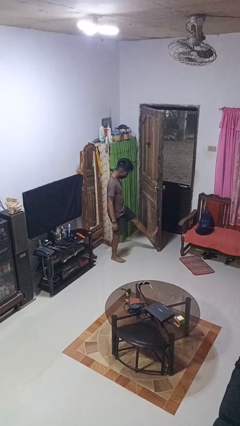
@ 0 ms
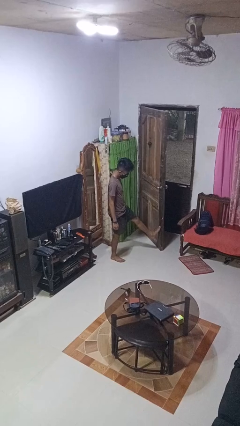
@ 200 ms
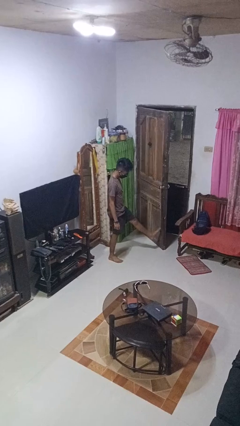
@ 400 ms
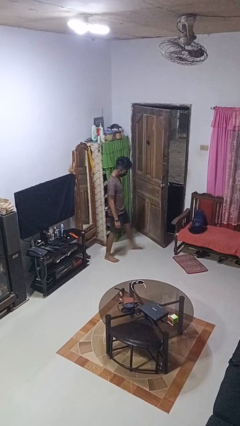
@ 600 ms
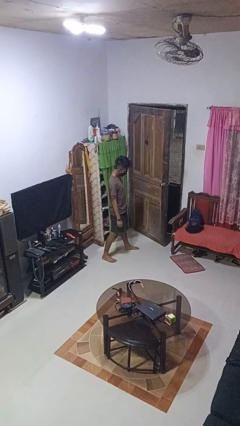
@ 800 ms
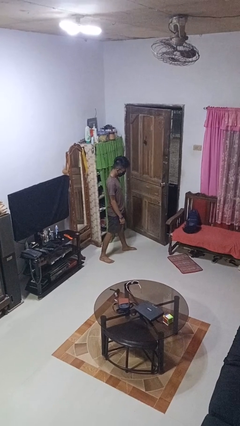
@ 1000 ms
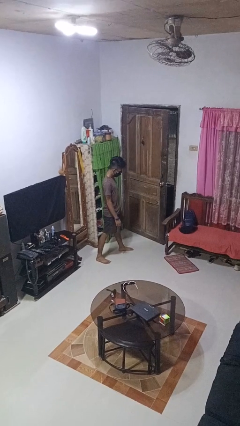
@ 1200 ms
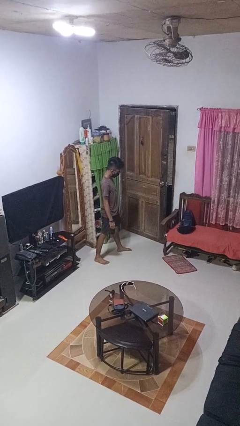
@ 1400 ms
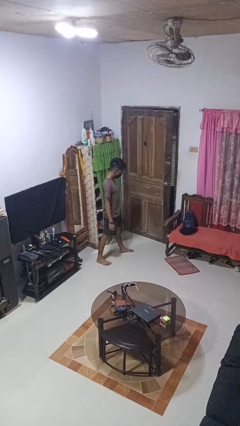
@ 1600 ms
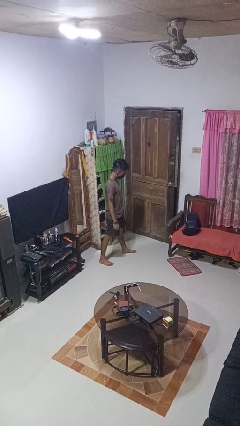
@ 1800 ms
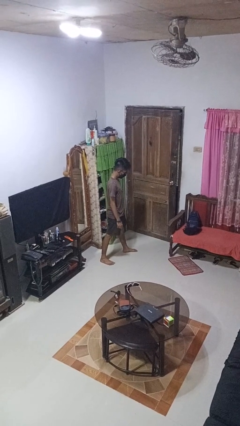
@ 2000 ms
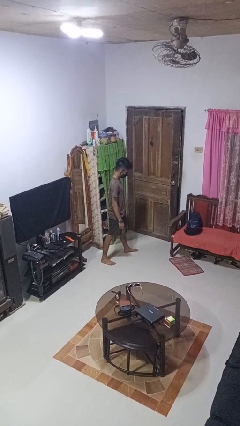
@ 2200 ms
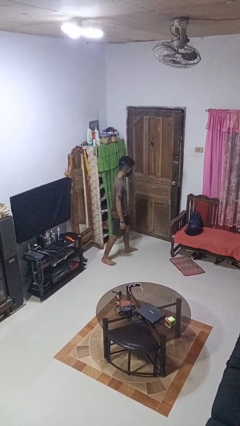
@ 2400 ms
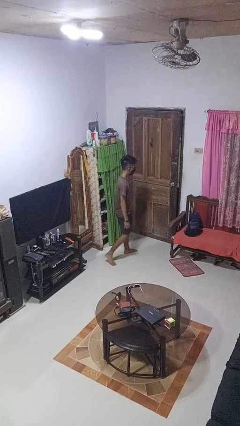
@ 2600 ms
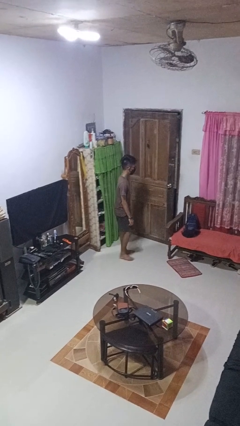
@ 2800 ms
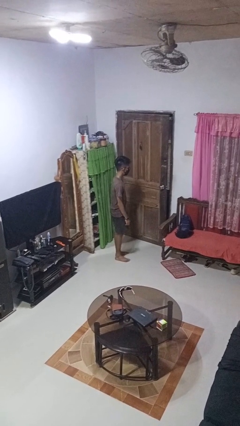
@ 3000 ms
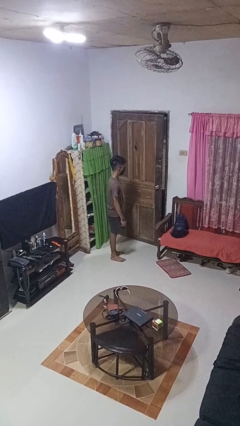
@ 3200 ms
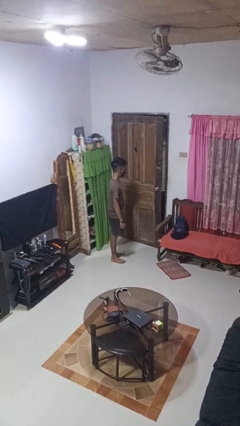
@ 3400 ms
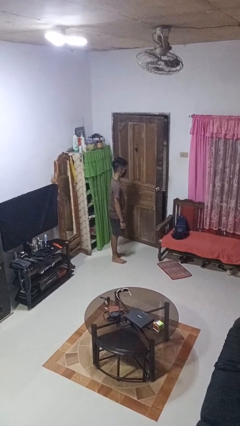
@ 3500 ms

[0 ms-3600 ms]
person closes door with foot

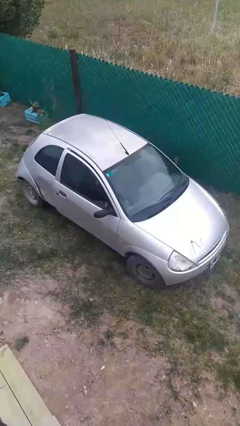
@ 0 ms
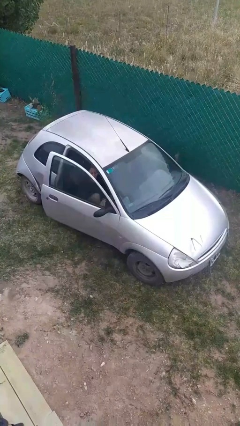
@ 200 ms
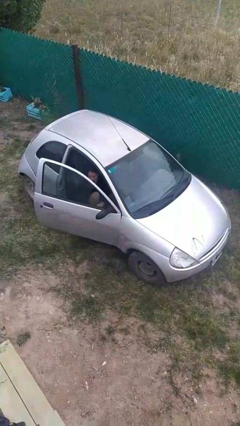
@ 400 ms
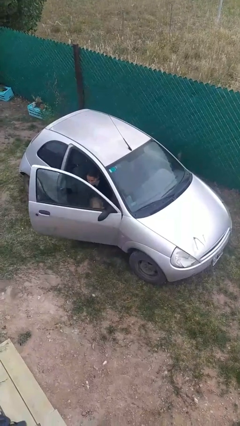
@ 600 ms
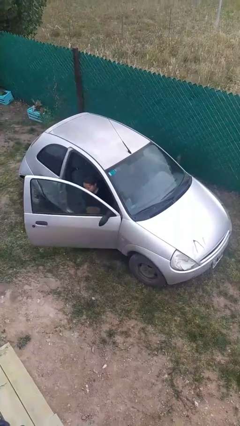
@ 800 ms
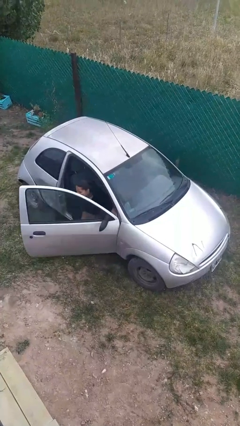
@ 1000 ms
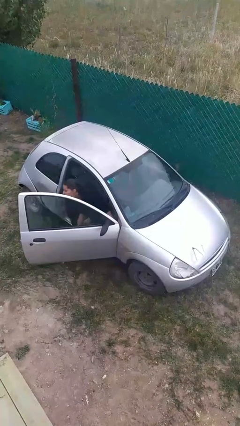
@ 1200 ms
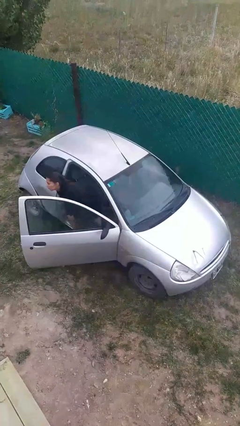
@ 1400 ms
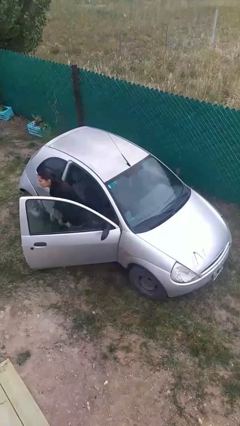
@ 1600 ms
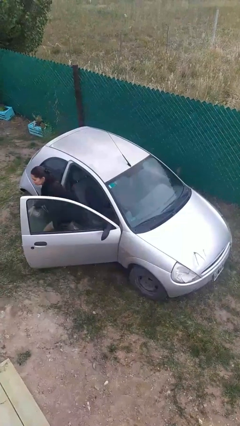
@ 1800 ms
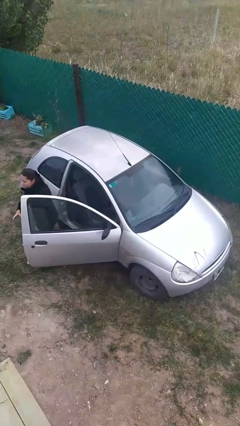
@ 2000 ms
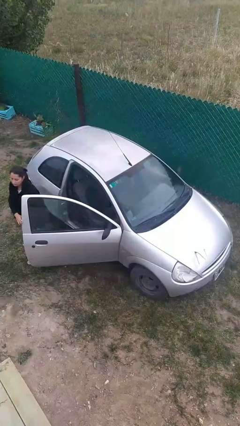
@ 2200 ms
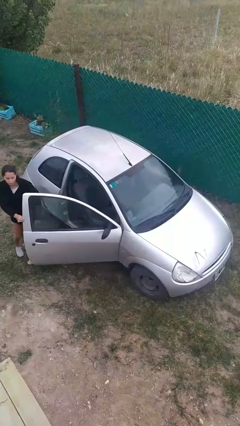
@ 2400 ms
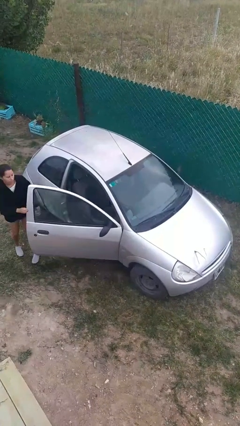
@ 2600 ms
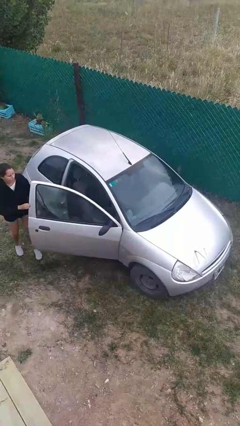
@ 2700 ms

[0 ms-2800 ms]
car drops off person

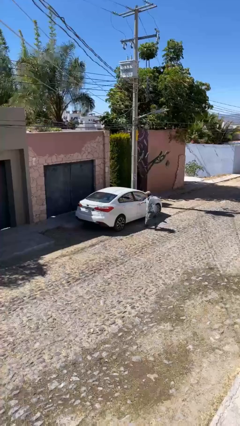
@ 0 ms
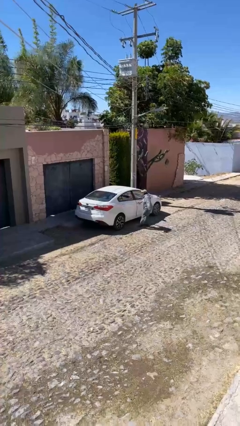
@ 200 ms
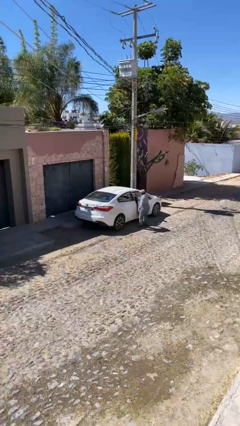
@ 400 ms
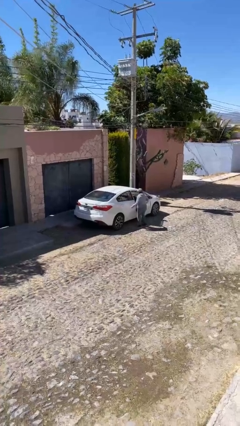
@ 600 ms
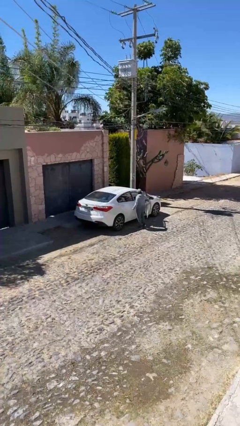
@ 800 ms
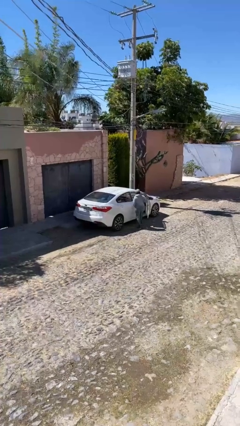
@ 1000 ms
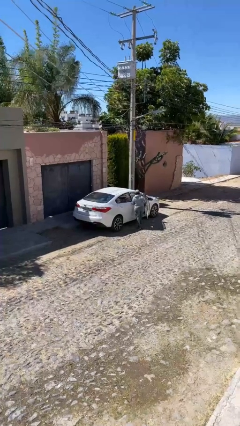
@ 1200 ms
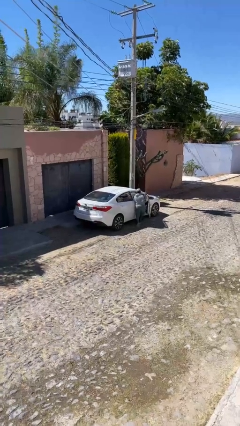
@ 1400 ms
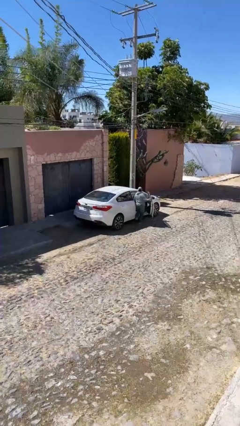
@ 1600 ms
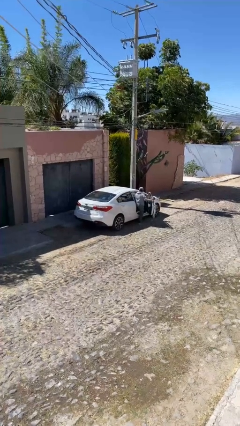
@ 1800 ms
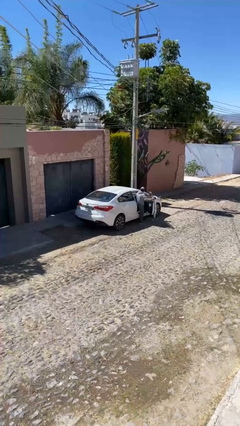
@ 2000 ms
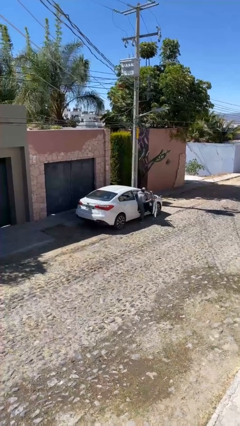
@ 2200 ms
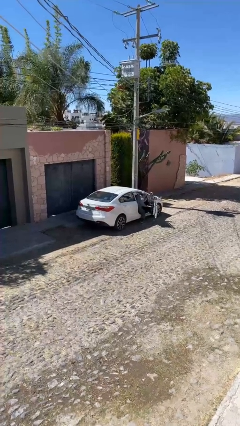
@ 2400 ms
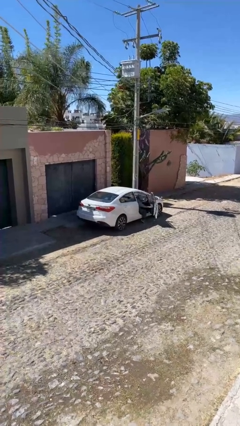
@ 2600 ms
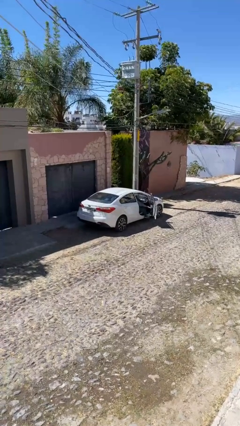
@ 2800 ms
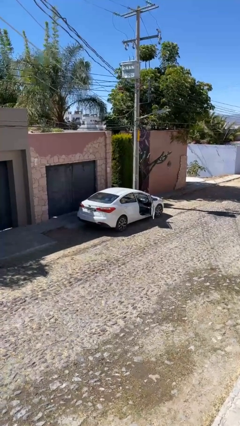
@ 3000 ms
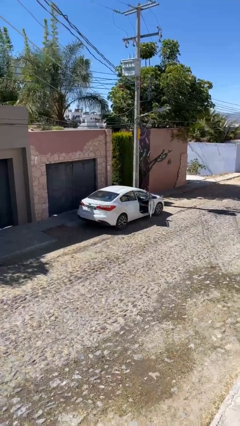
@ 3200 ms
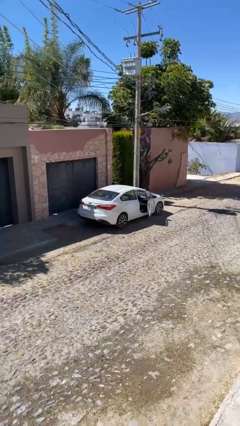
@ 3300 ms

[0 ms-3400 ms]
car picks up person

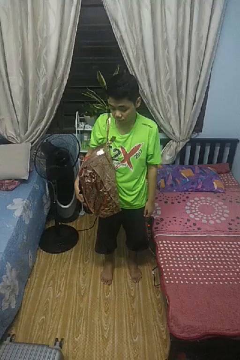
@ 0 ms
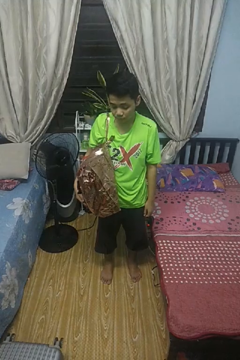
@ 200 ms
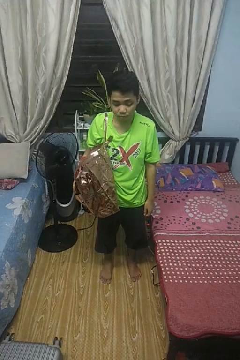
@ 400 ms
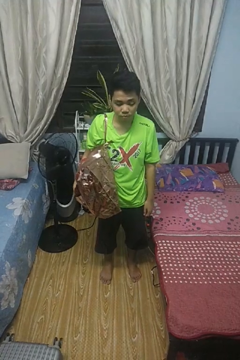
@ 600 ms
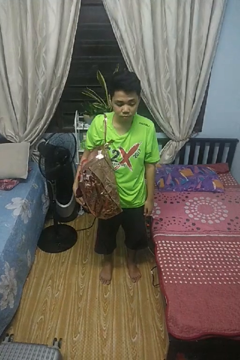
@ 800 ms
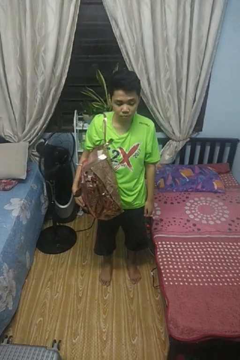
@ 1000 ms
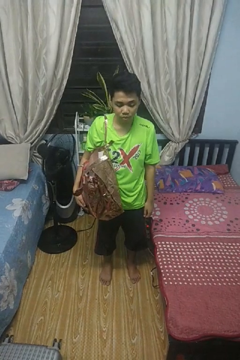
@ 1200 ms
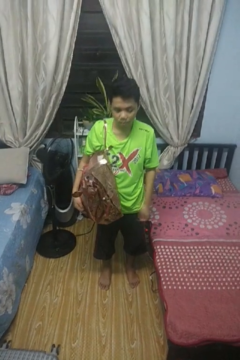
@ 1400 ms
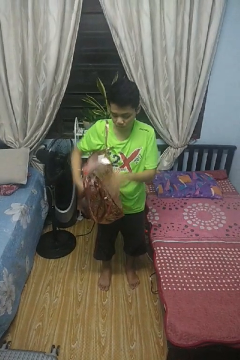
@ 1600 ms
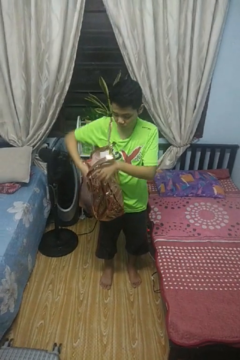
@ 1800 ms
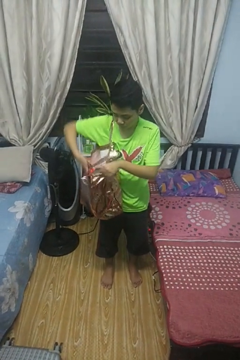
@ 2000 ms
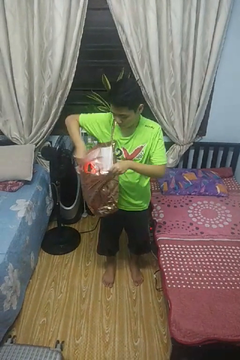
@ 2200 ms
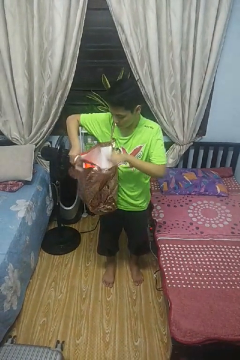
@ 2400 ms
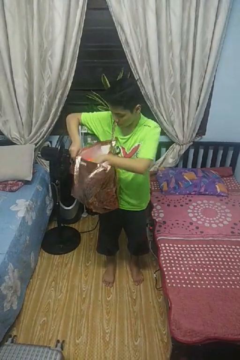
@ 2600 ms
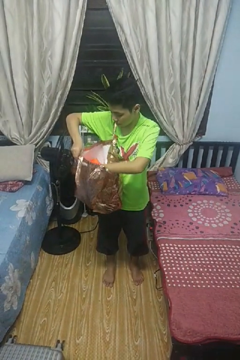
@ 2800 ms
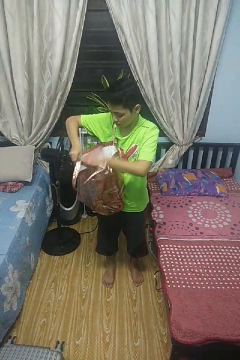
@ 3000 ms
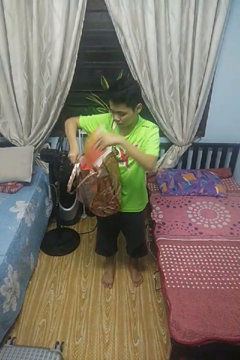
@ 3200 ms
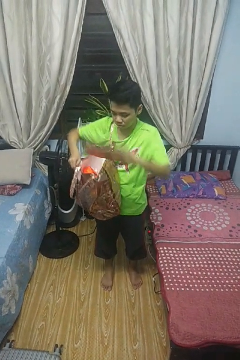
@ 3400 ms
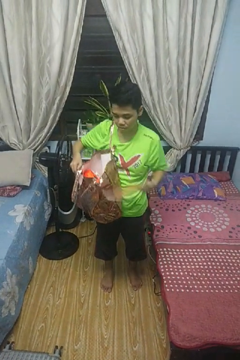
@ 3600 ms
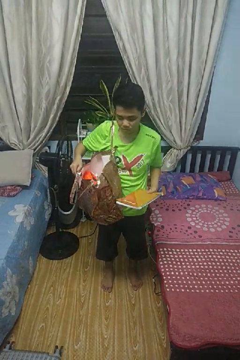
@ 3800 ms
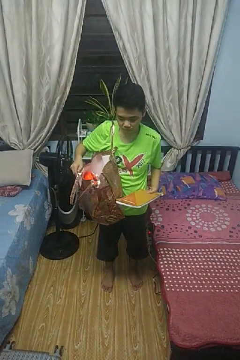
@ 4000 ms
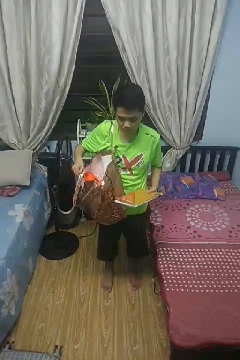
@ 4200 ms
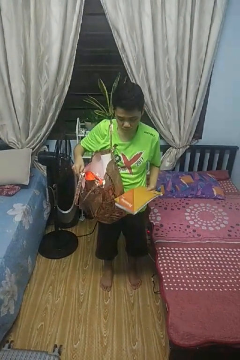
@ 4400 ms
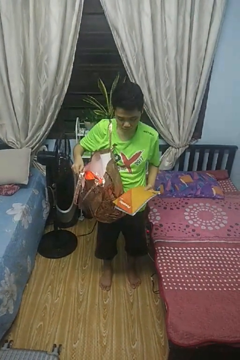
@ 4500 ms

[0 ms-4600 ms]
person takes object from bag

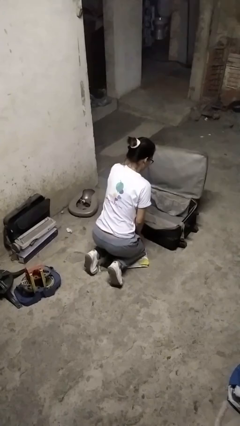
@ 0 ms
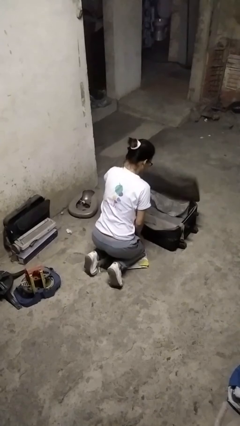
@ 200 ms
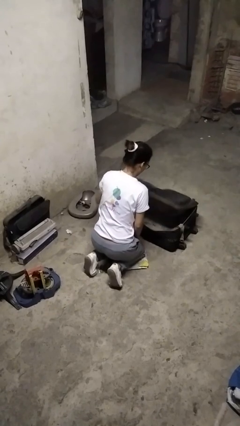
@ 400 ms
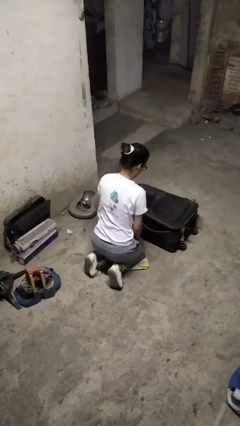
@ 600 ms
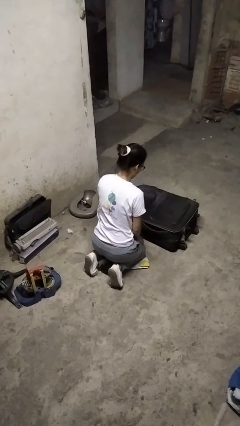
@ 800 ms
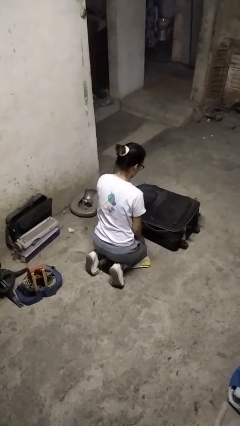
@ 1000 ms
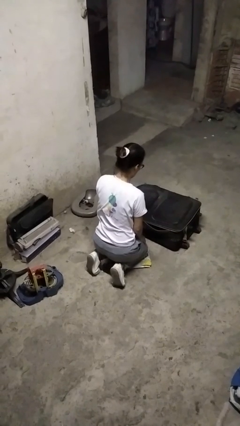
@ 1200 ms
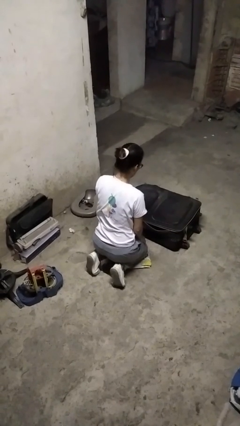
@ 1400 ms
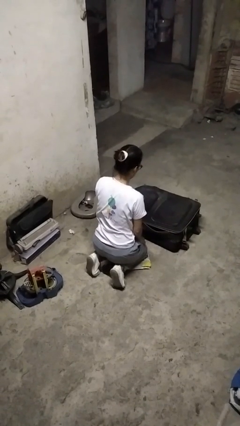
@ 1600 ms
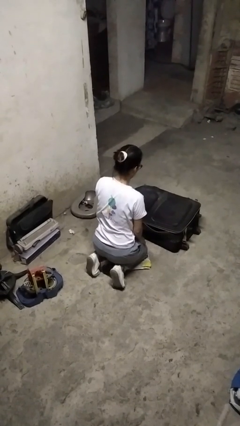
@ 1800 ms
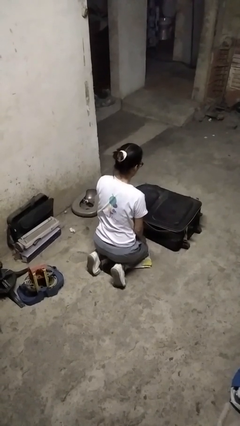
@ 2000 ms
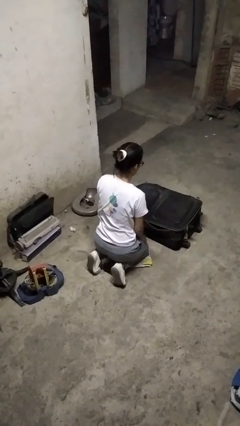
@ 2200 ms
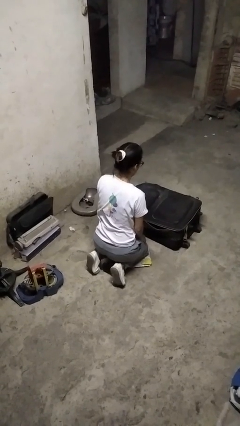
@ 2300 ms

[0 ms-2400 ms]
person closes suitcase

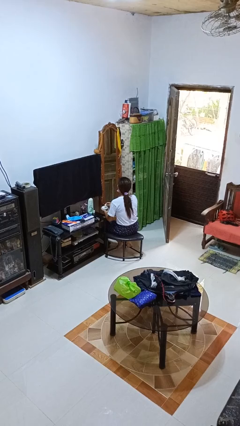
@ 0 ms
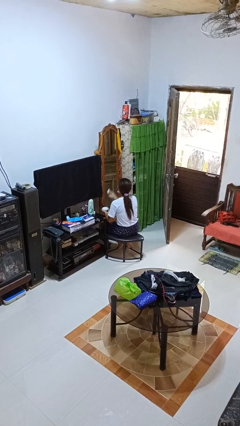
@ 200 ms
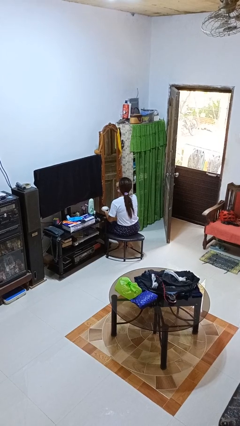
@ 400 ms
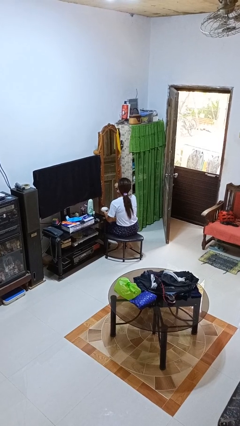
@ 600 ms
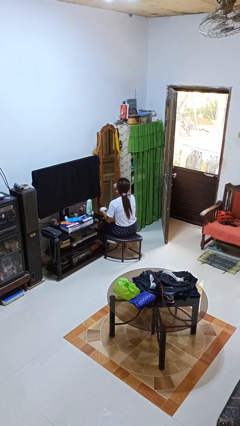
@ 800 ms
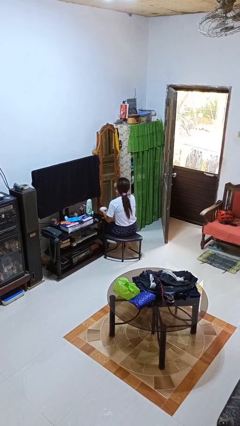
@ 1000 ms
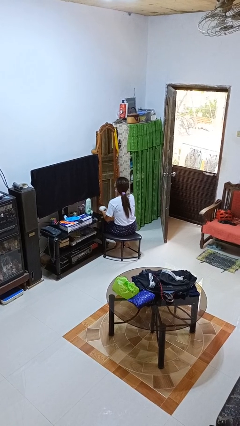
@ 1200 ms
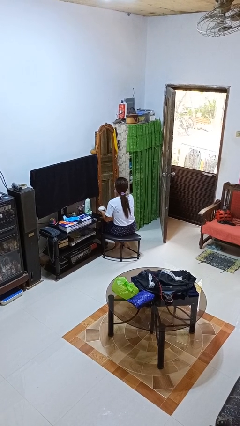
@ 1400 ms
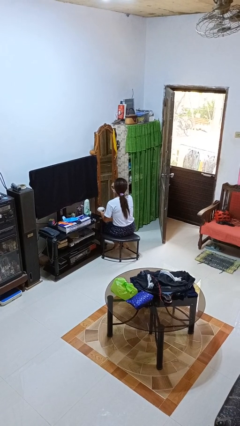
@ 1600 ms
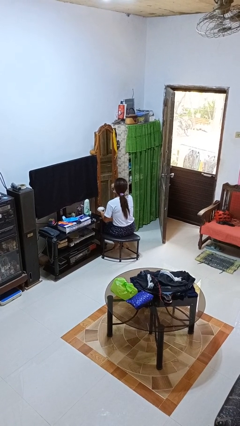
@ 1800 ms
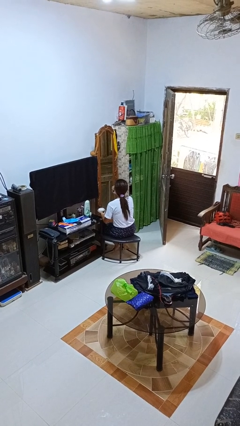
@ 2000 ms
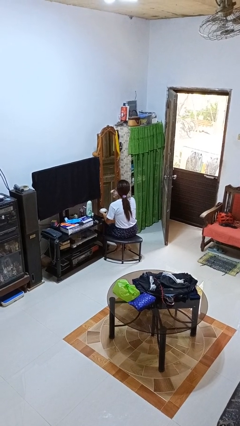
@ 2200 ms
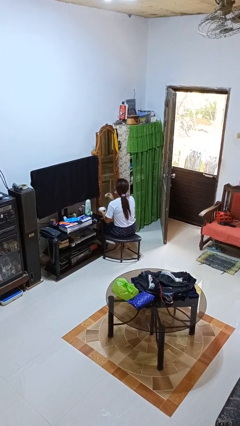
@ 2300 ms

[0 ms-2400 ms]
person applies foundation makeup
